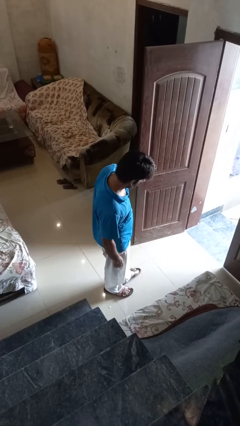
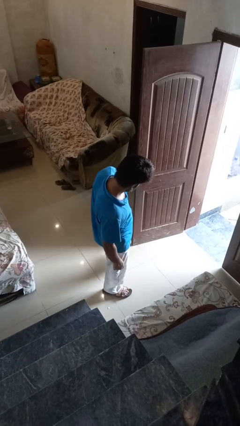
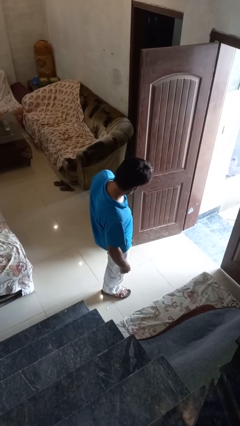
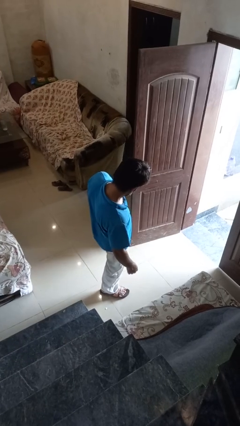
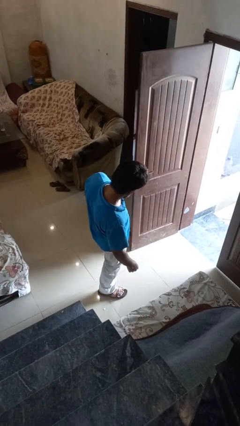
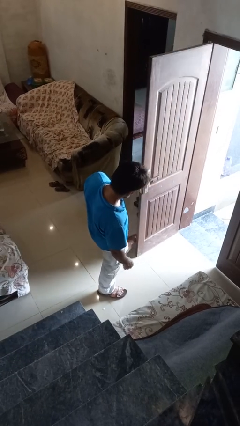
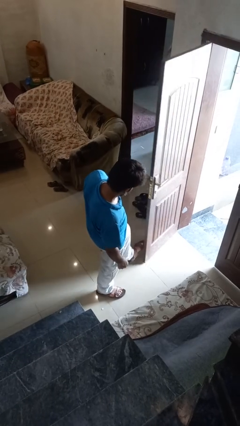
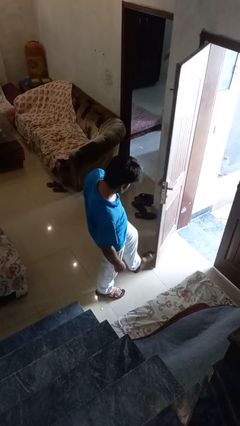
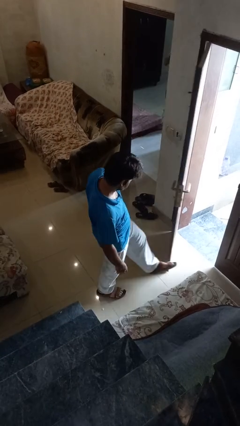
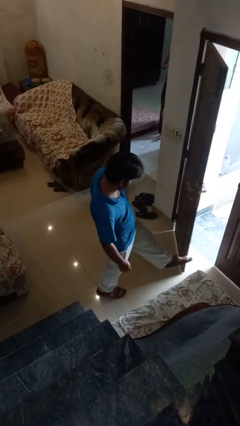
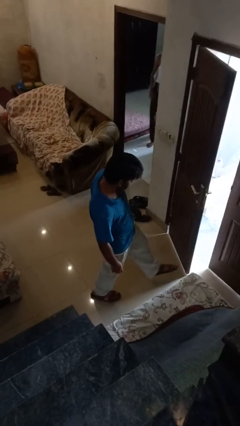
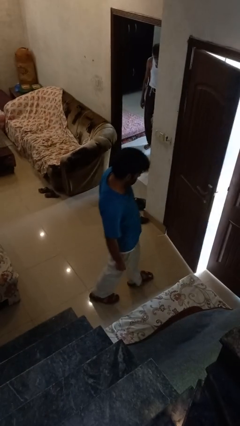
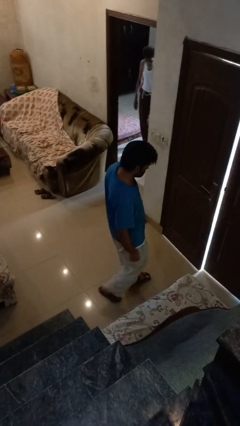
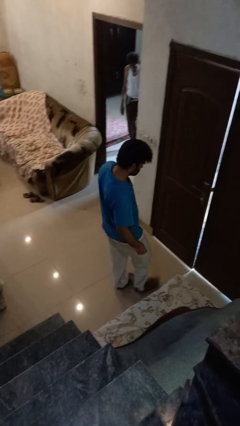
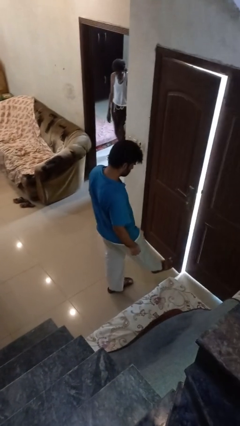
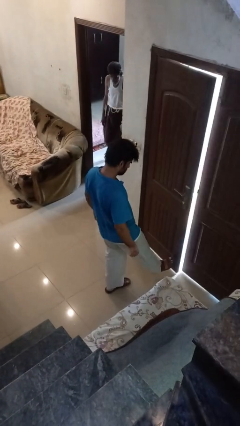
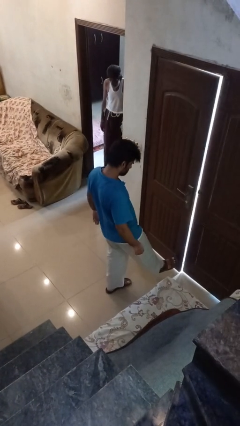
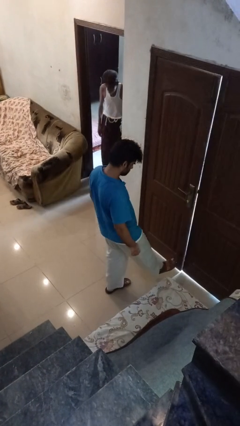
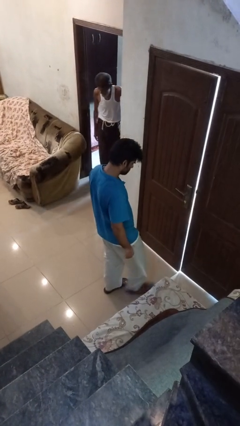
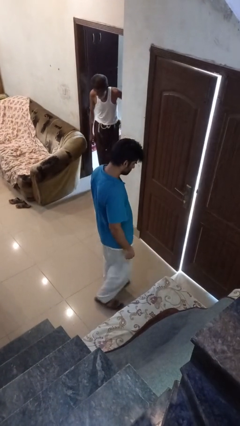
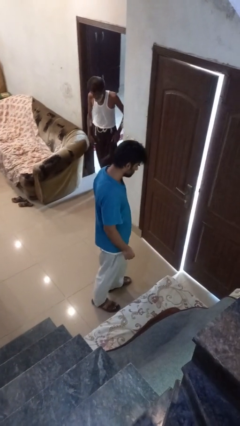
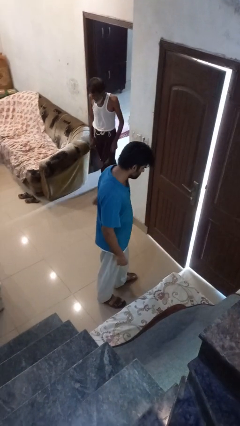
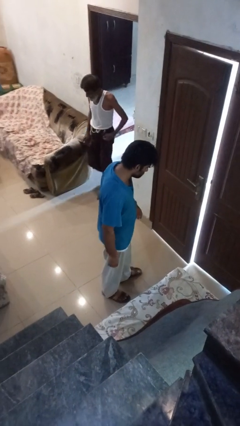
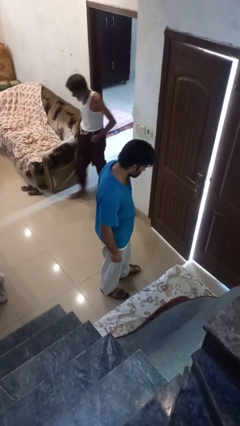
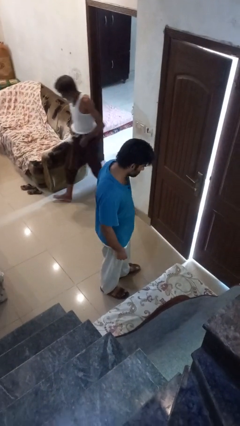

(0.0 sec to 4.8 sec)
person closes door with foot

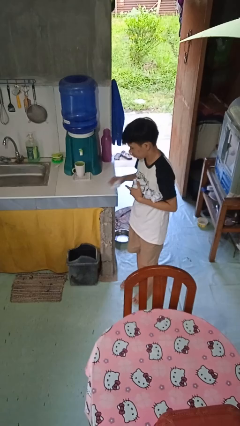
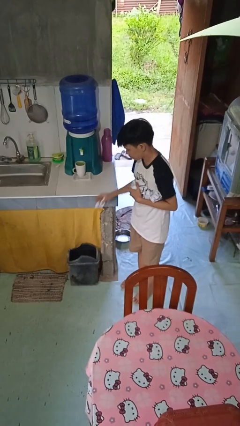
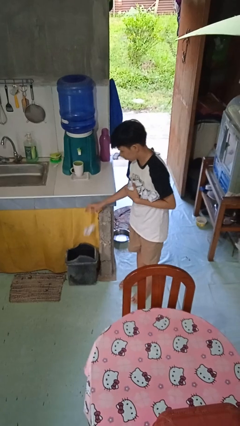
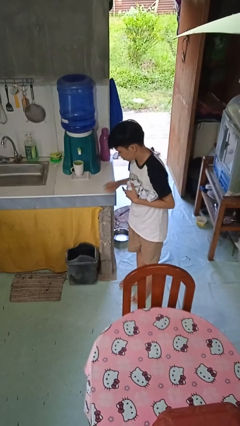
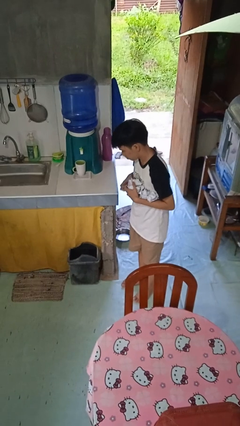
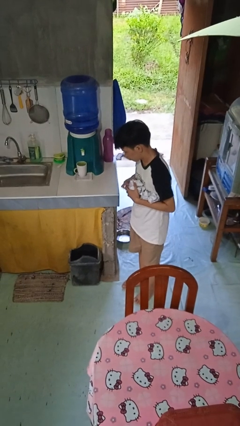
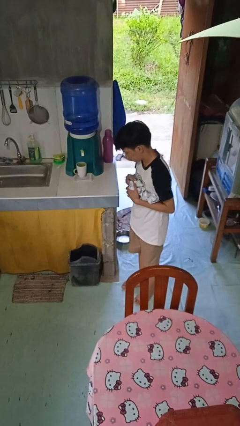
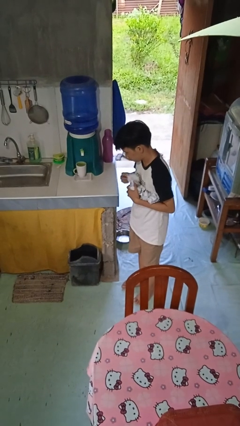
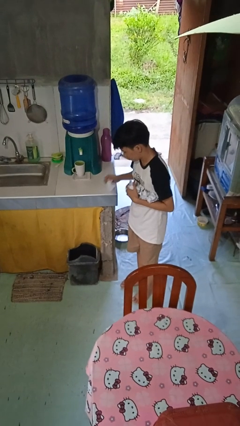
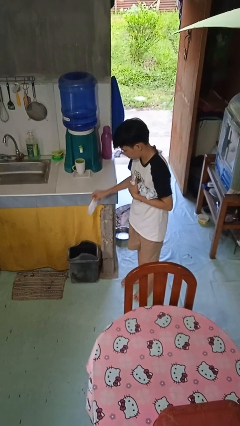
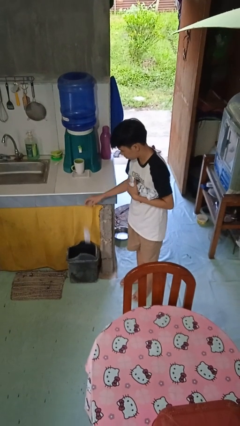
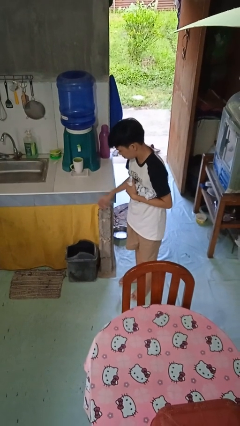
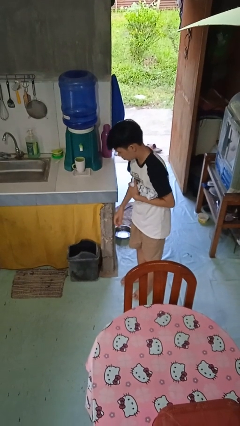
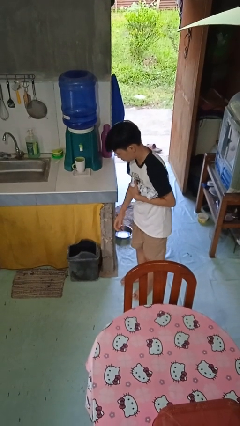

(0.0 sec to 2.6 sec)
person discards trash

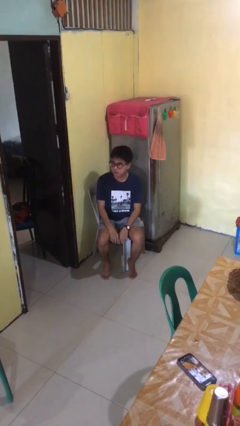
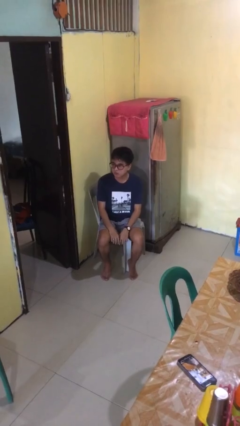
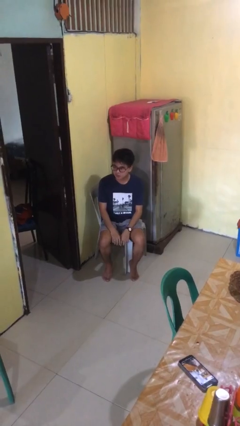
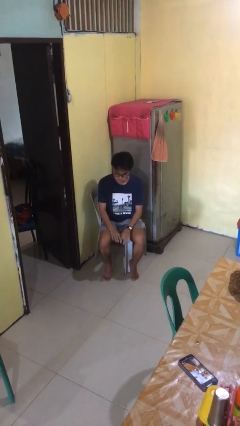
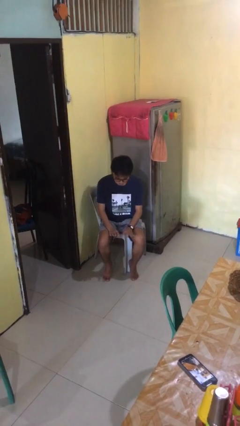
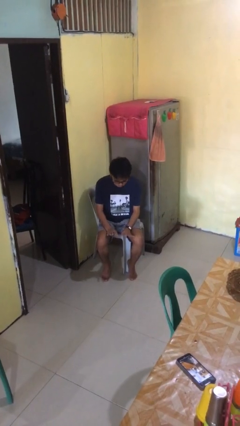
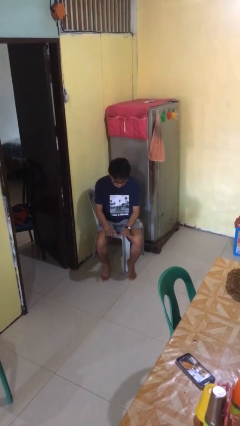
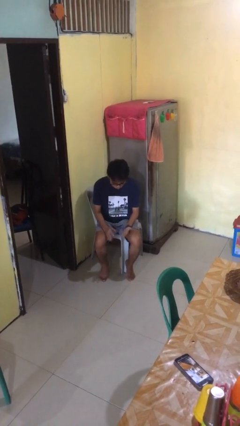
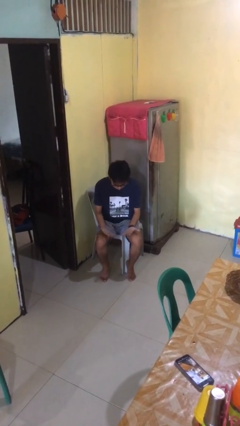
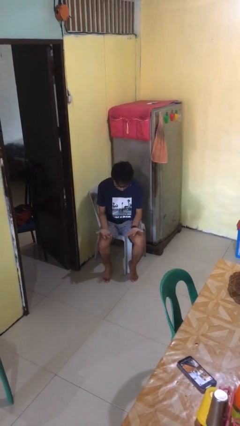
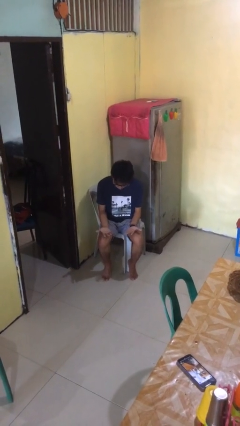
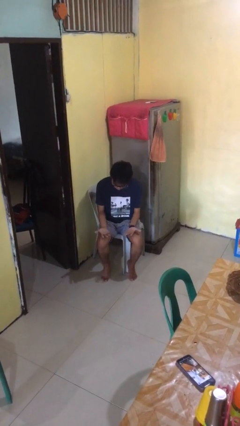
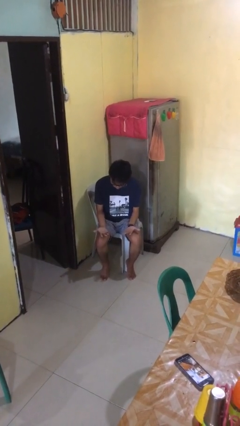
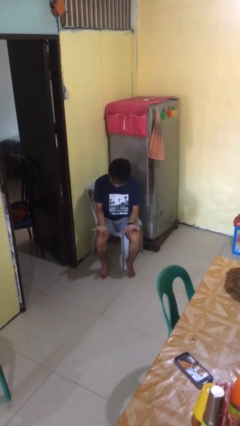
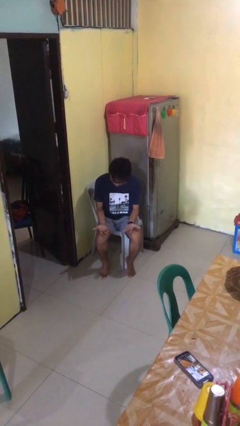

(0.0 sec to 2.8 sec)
person looks at hands in lap

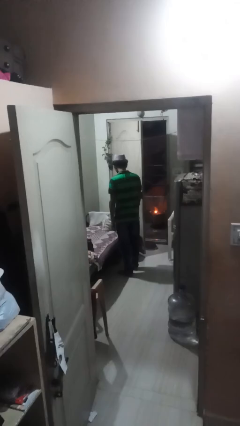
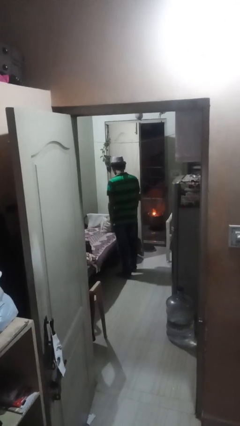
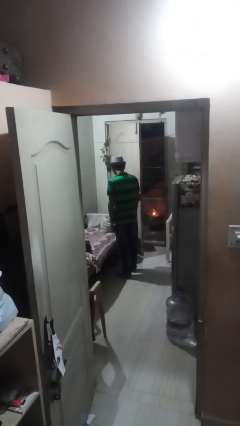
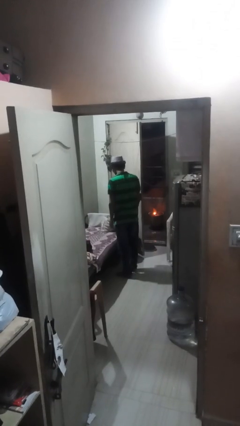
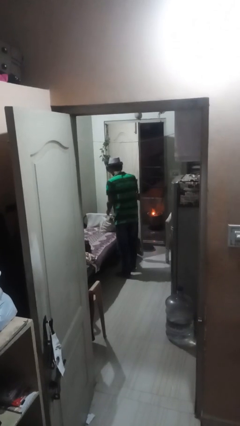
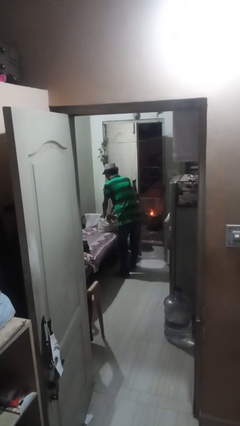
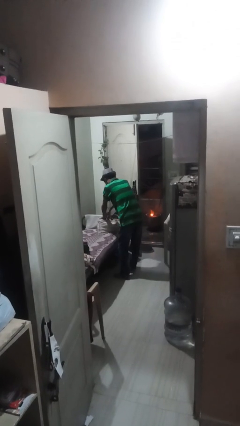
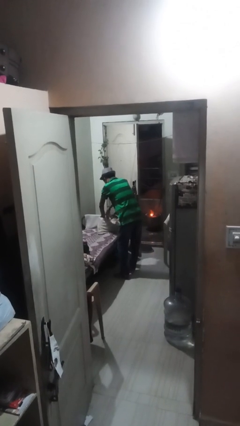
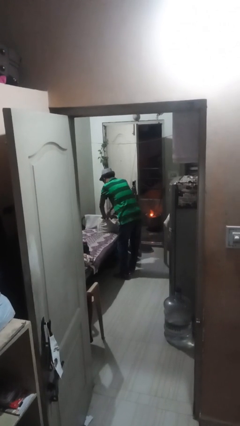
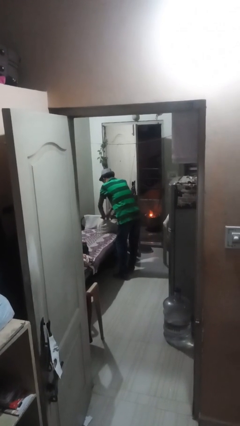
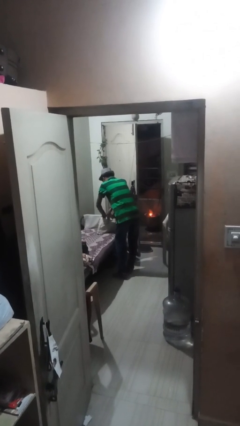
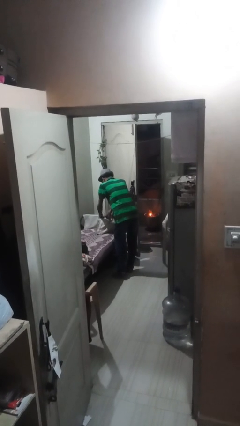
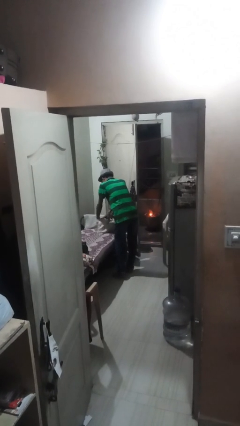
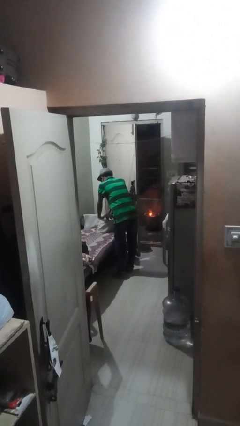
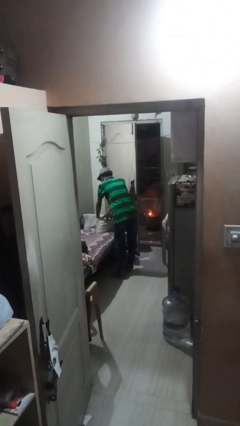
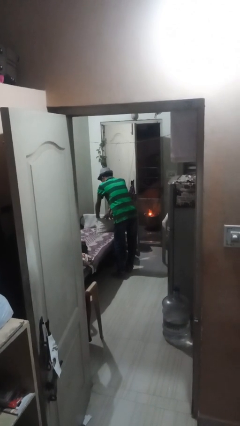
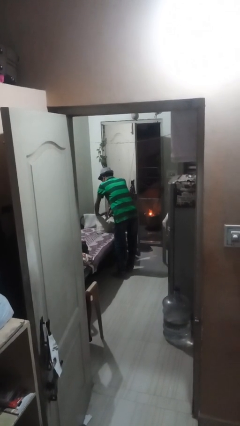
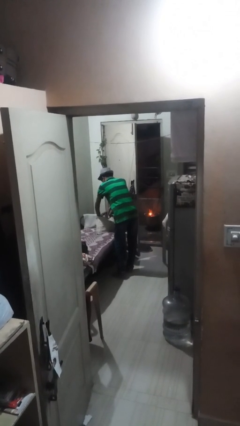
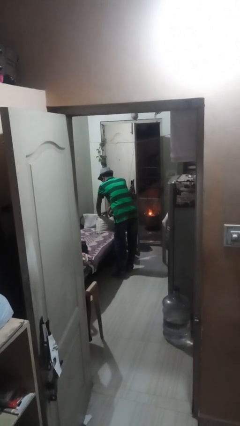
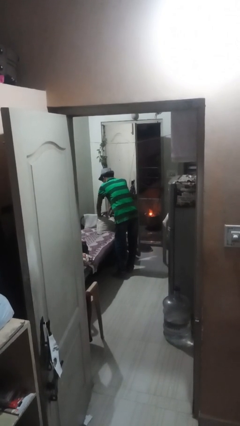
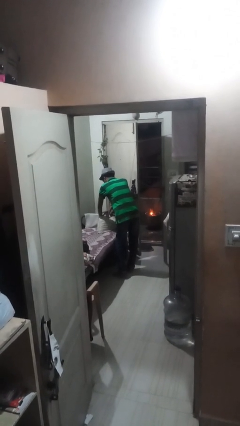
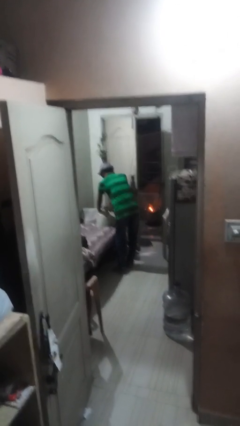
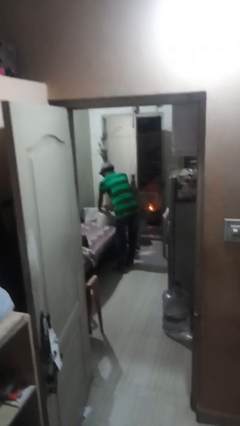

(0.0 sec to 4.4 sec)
person searches in bag

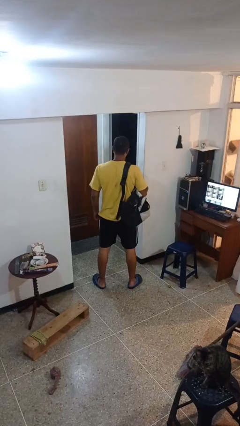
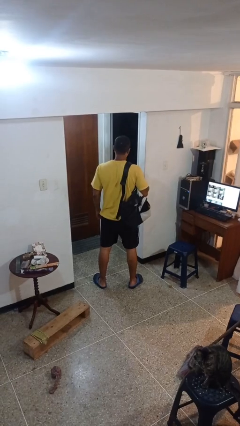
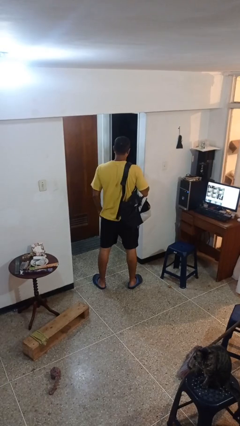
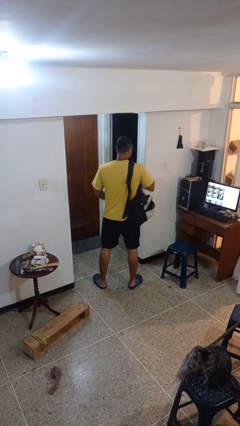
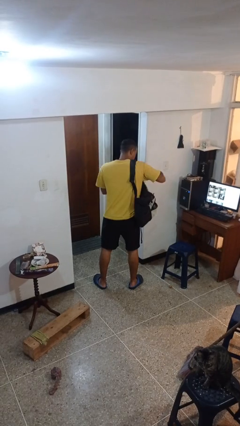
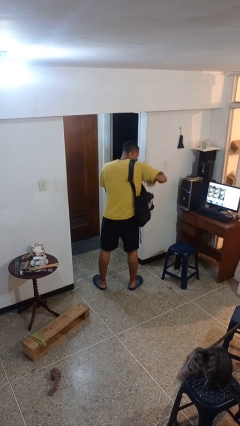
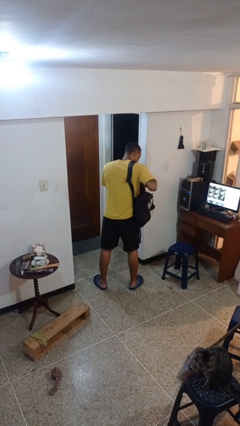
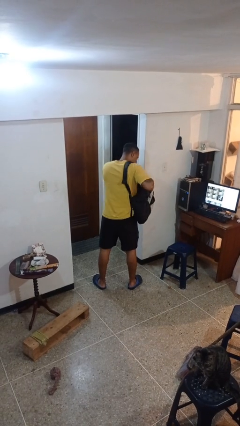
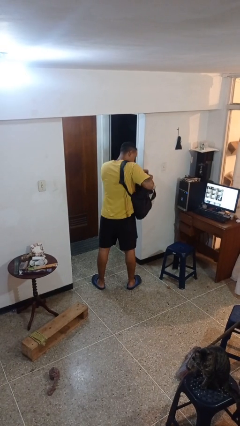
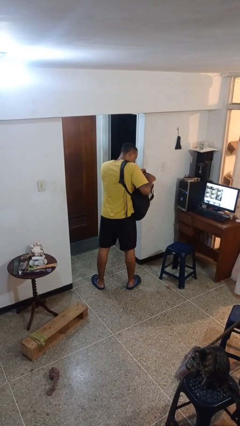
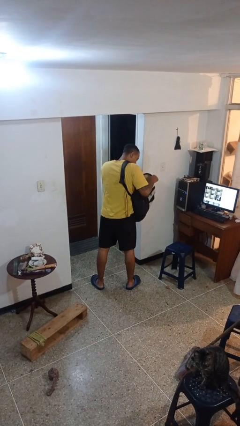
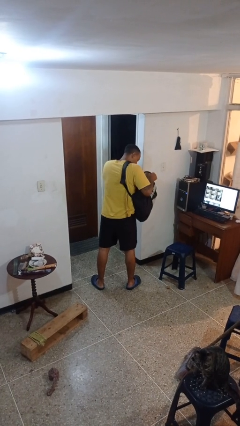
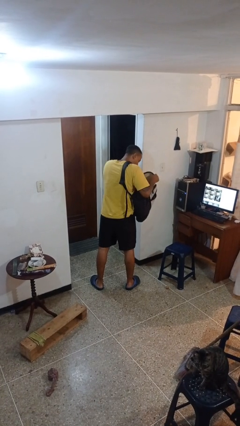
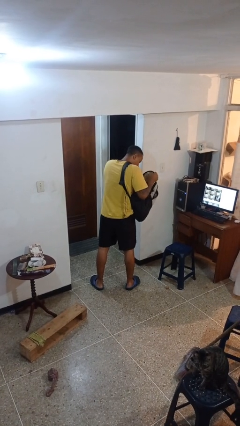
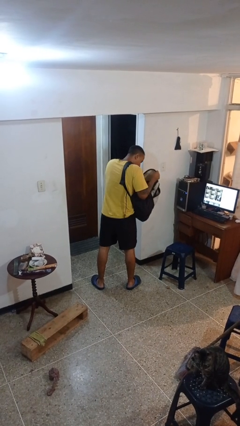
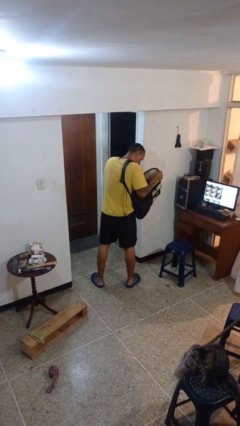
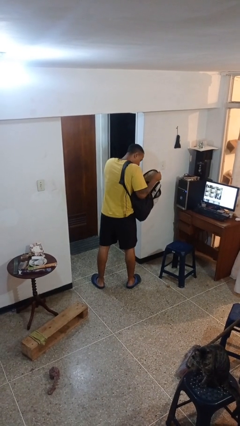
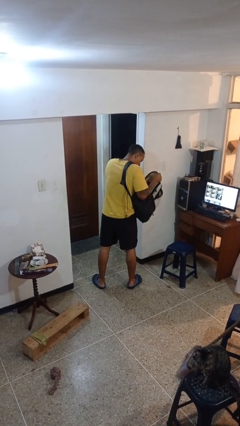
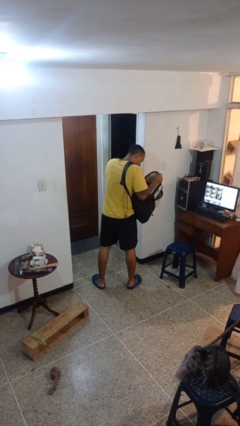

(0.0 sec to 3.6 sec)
person searches in backpack
